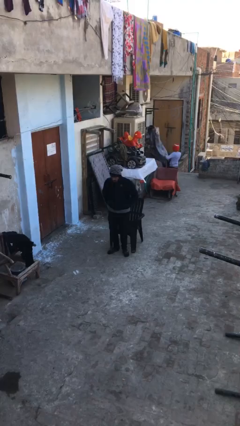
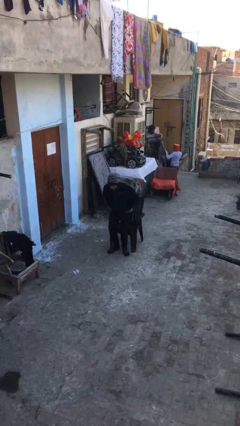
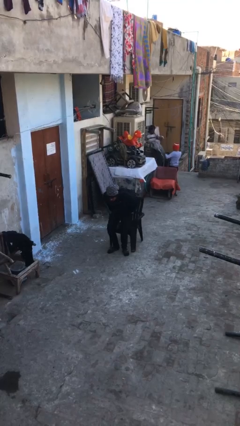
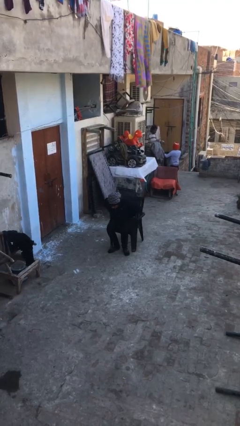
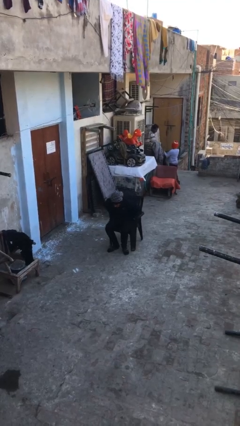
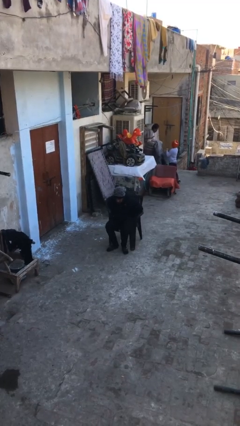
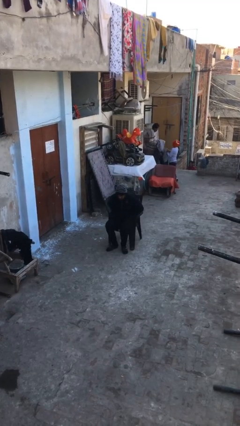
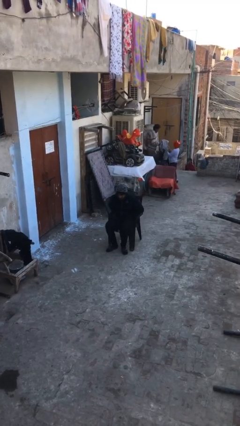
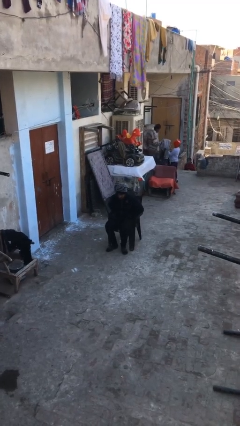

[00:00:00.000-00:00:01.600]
person sits down

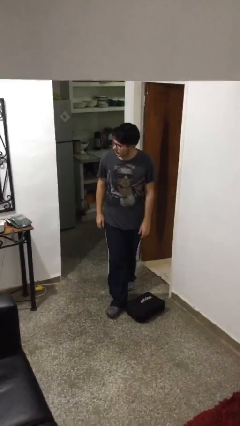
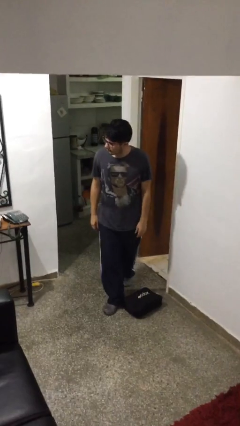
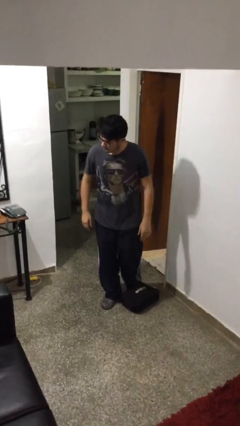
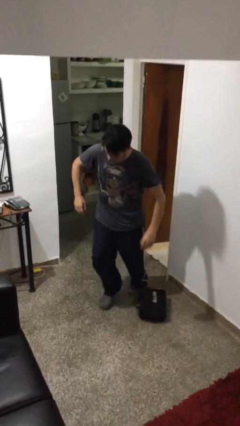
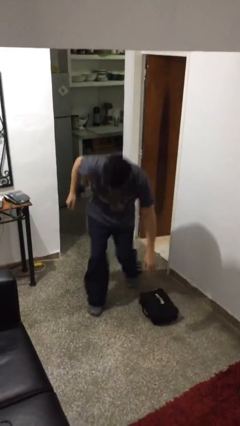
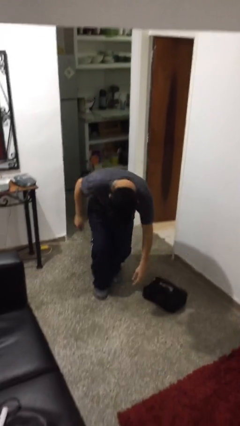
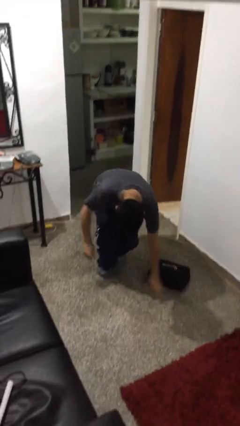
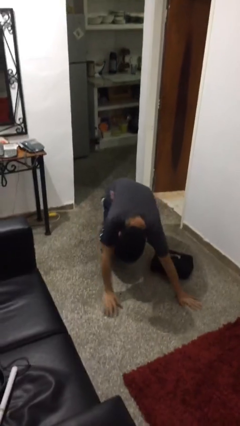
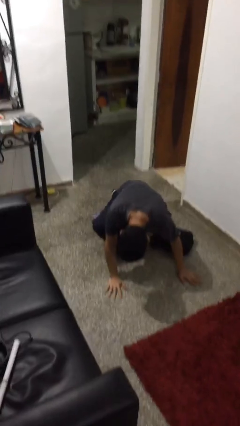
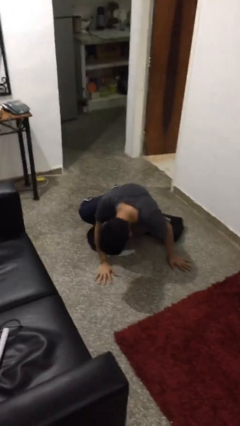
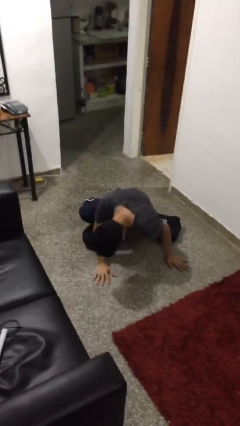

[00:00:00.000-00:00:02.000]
person trips on object on floor

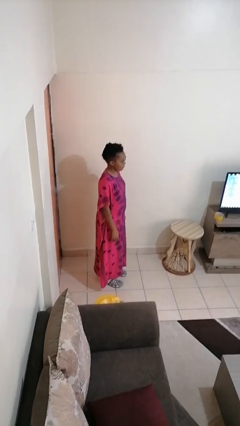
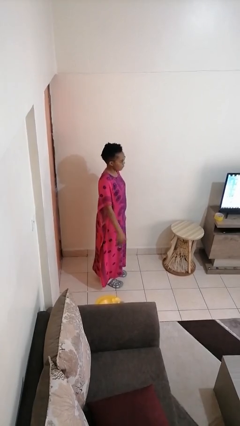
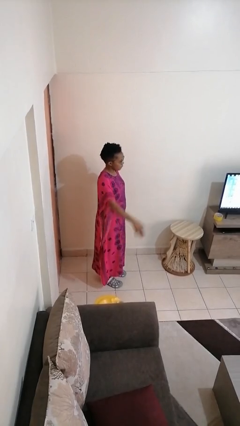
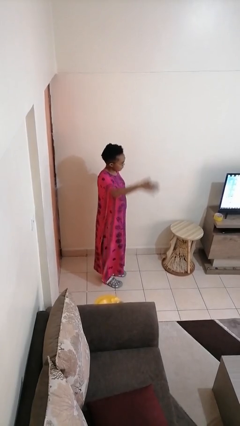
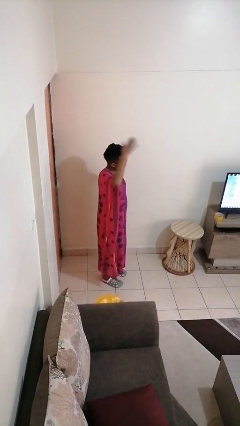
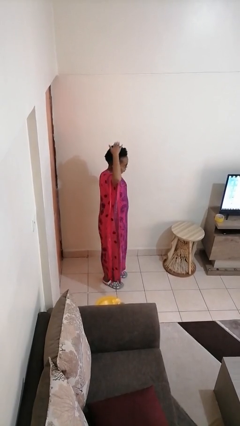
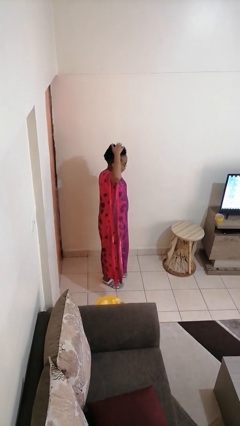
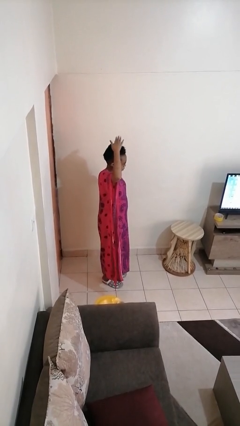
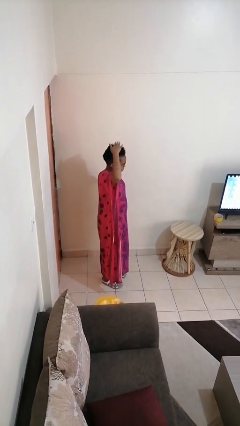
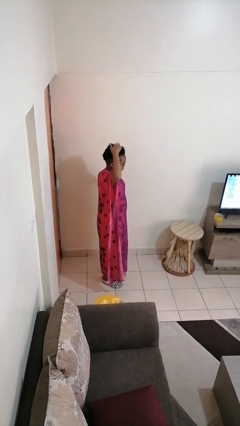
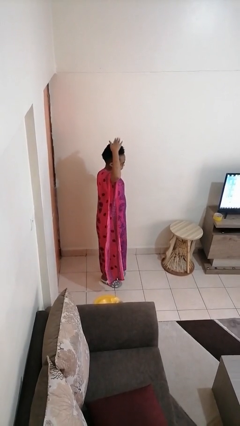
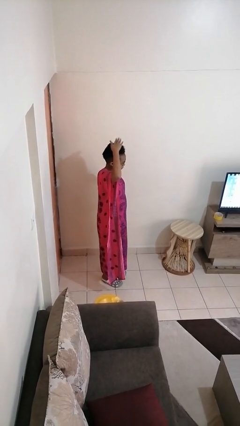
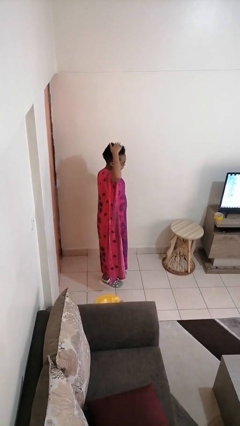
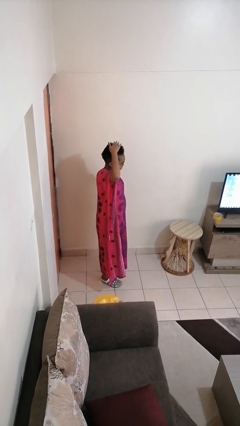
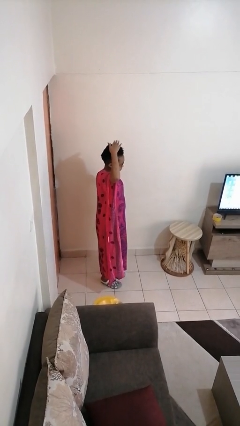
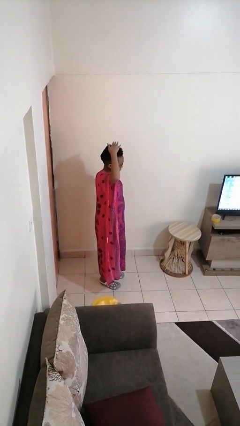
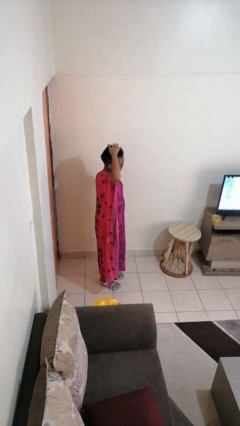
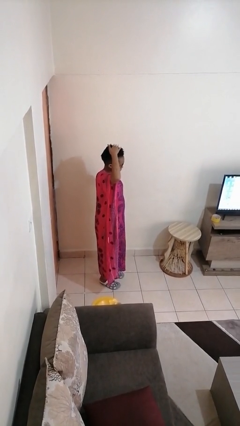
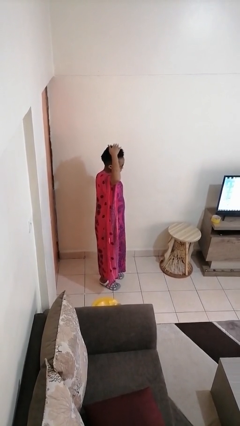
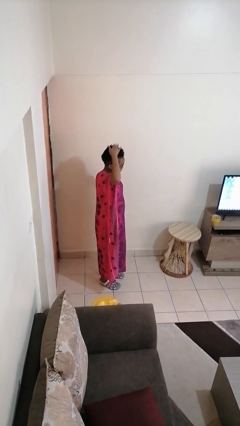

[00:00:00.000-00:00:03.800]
person pats head

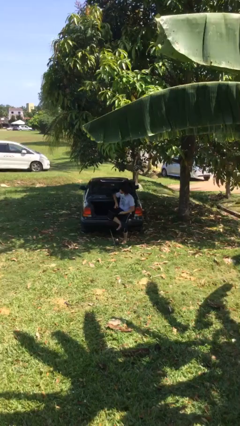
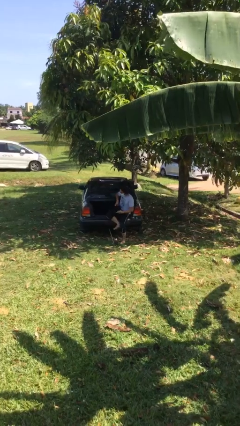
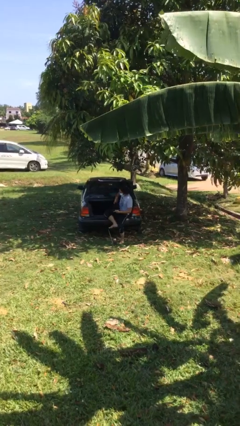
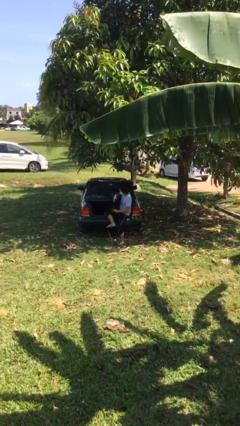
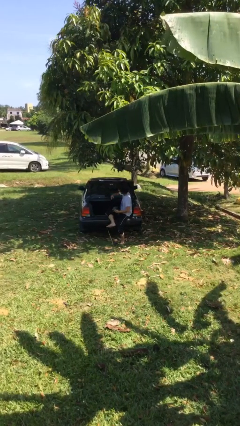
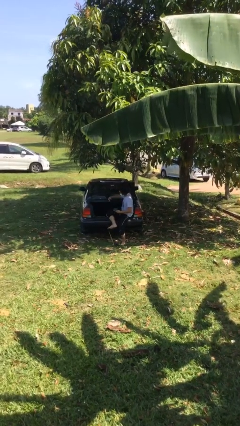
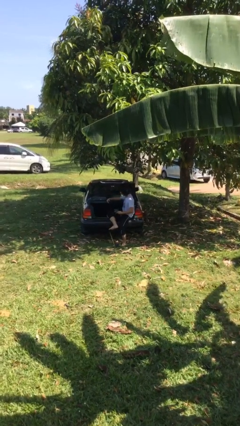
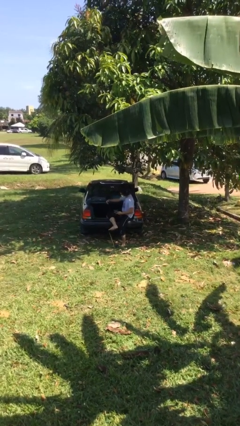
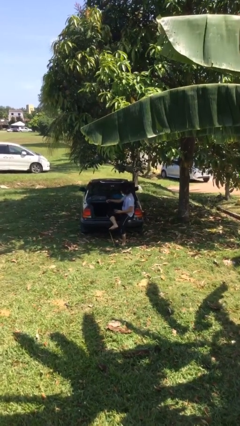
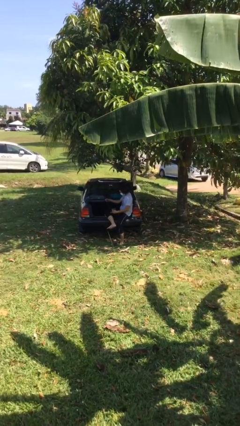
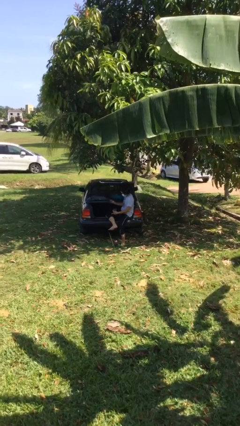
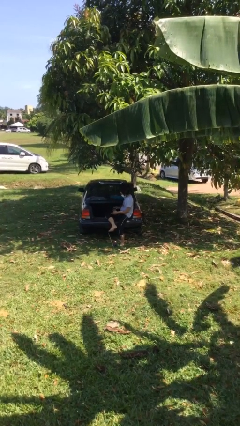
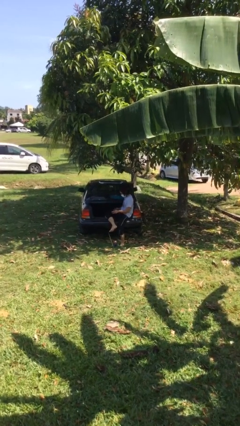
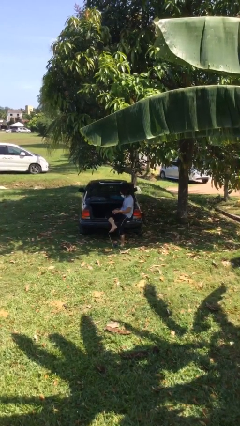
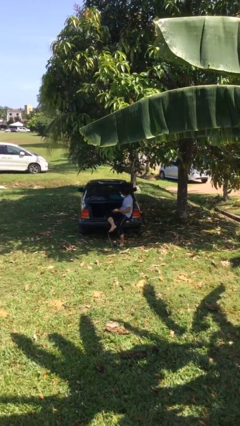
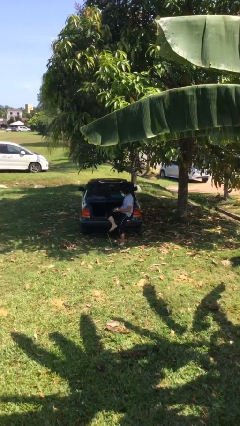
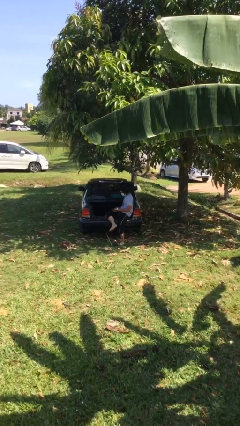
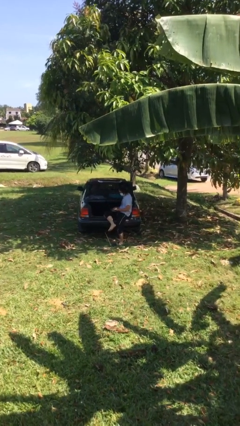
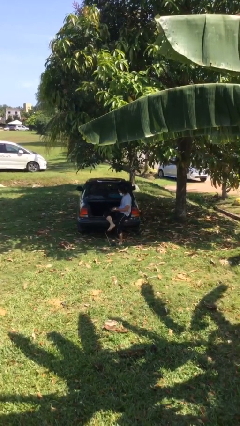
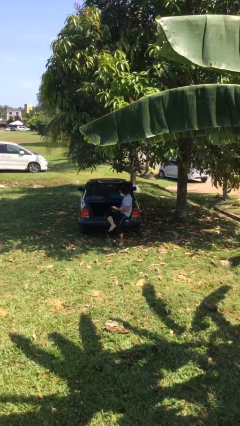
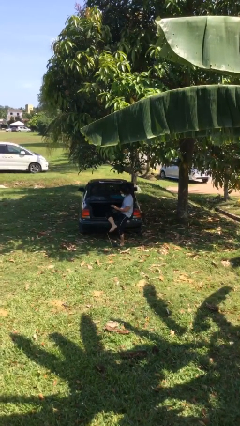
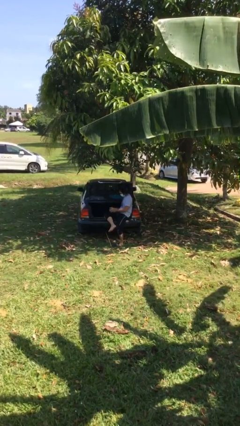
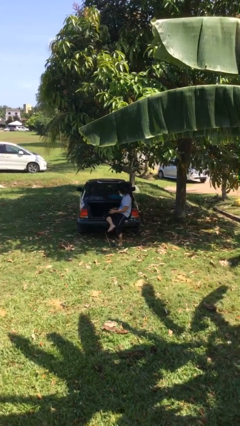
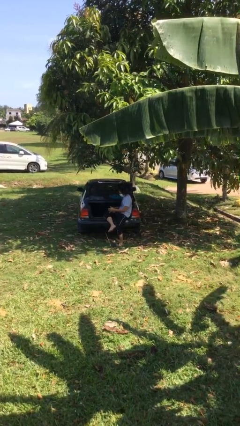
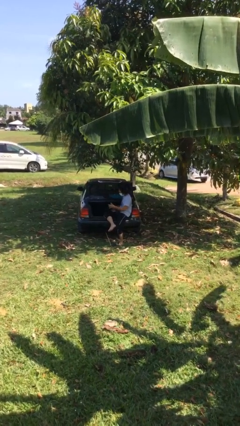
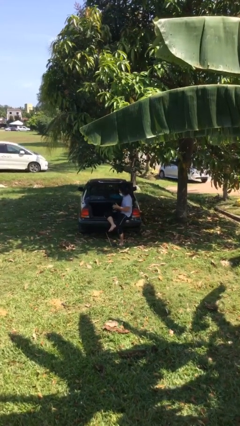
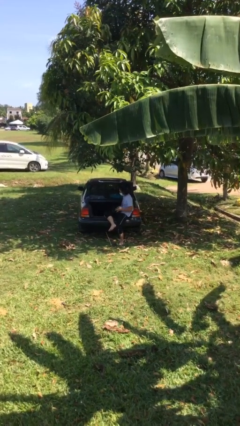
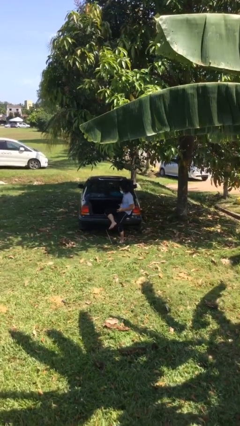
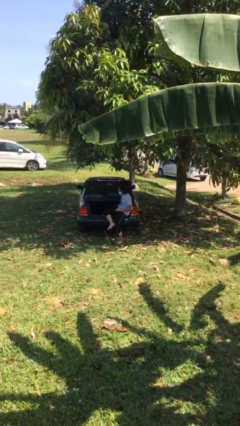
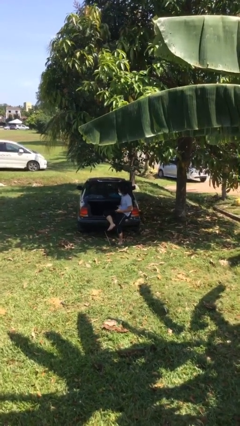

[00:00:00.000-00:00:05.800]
person interacts with laptop

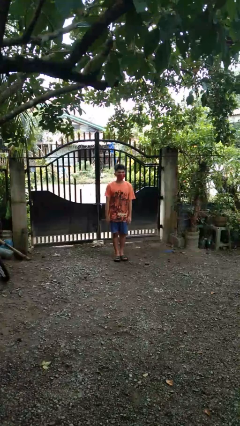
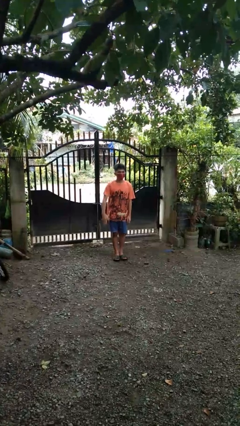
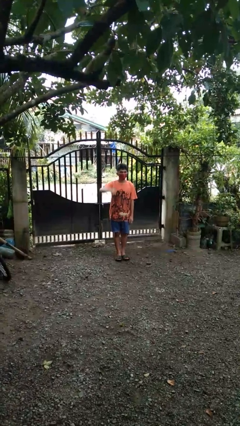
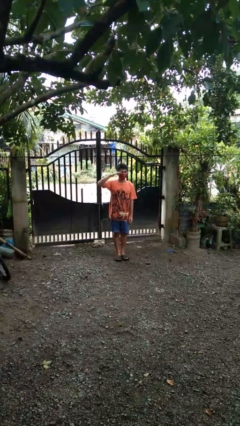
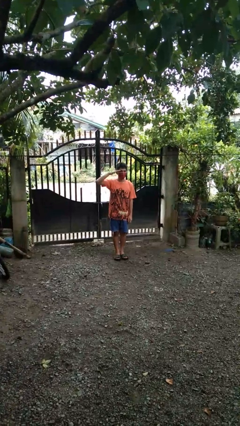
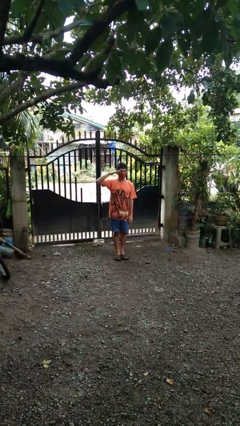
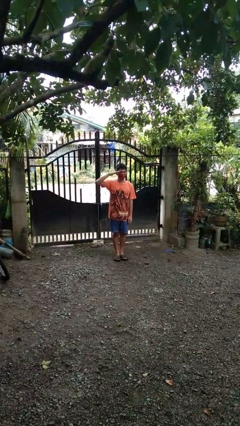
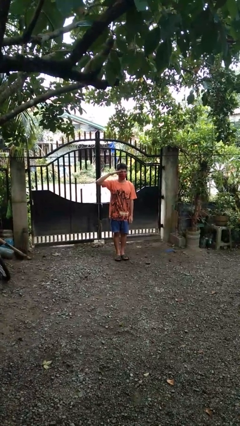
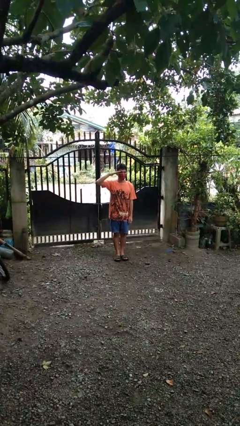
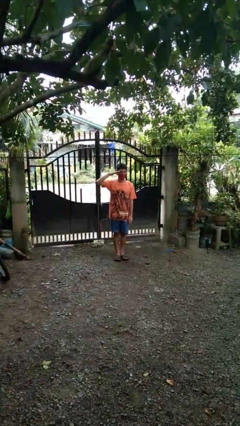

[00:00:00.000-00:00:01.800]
person salutes

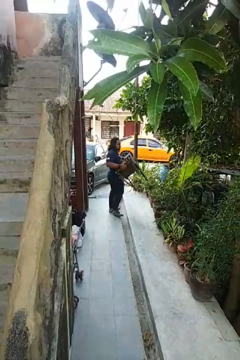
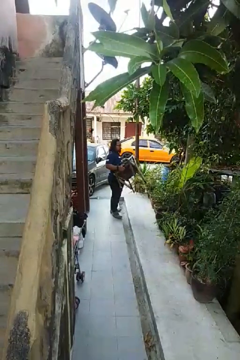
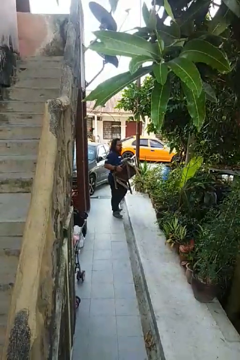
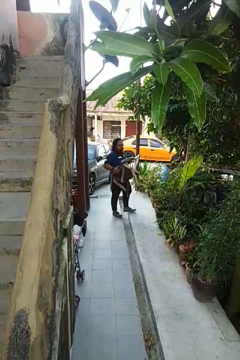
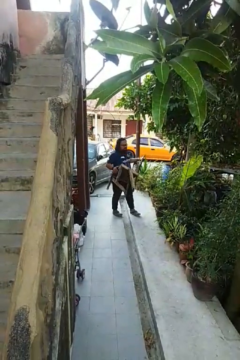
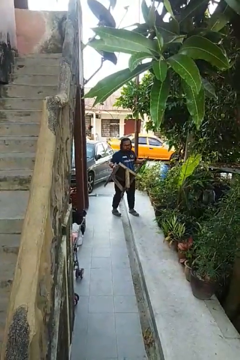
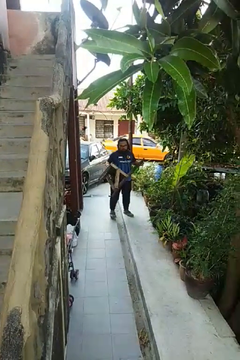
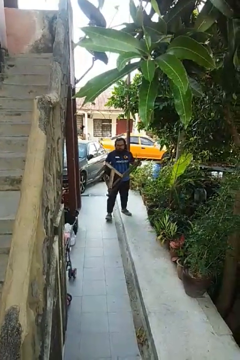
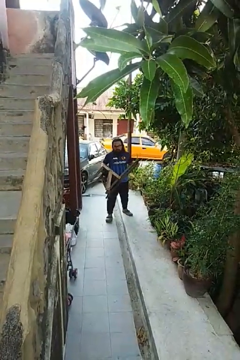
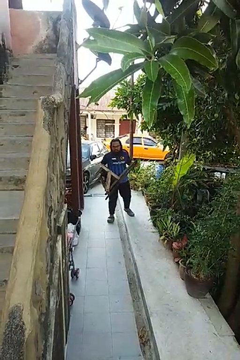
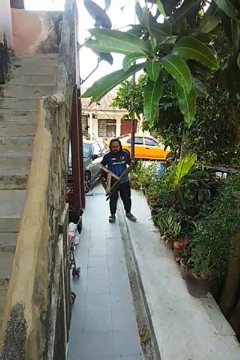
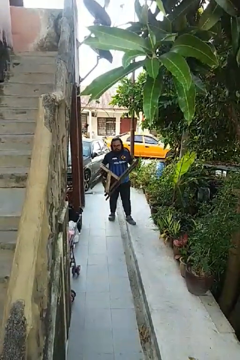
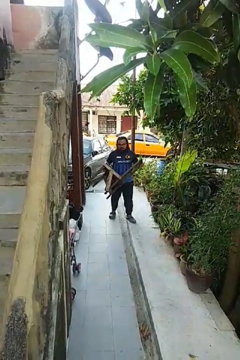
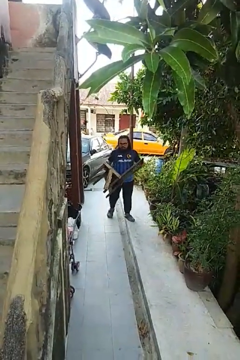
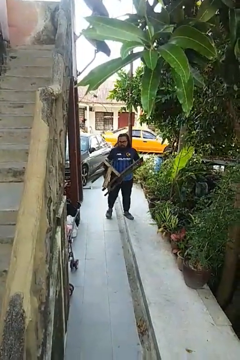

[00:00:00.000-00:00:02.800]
person carries furniture
